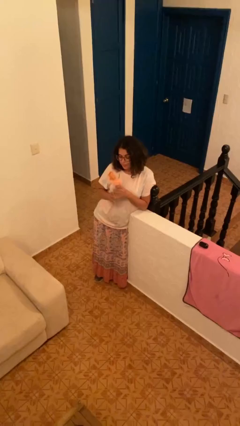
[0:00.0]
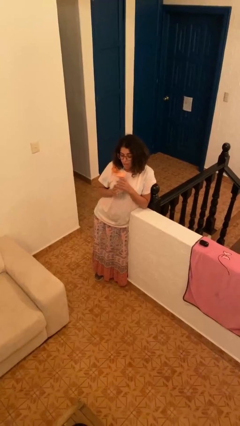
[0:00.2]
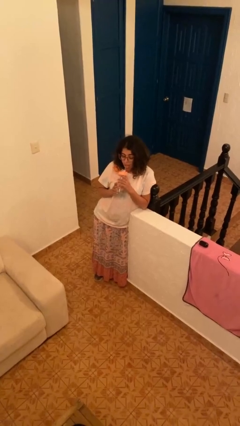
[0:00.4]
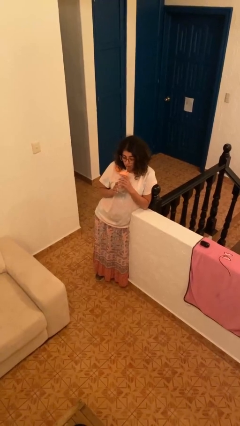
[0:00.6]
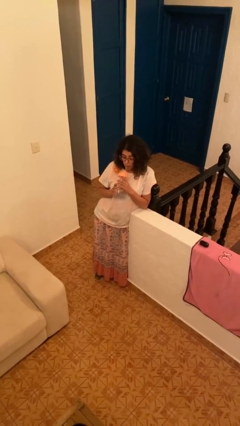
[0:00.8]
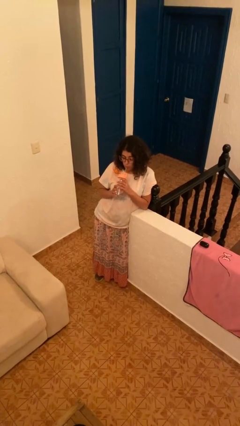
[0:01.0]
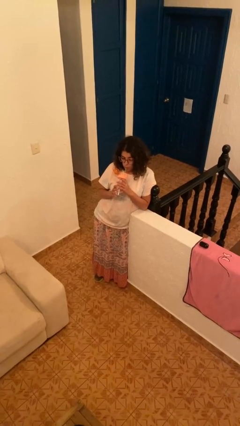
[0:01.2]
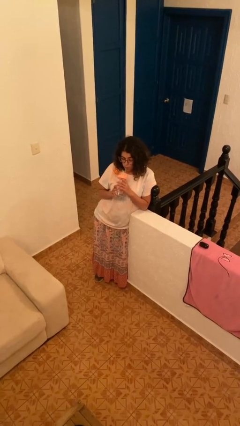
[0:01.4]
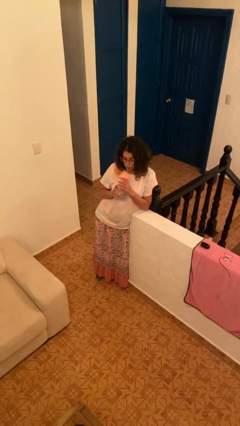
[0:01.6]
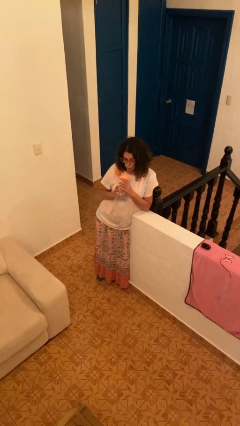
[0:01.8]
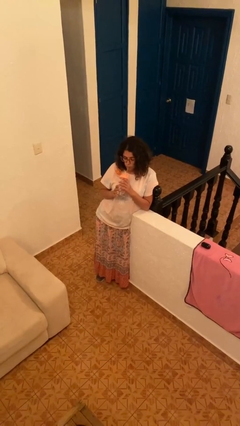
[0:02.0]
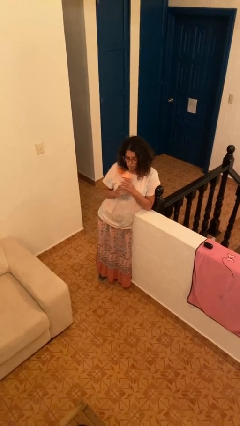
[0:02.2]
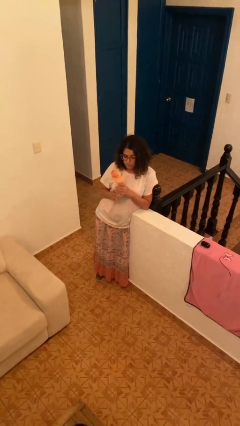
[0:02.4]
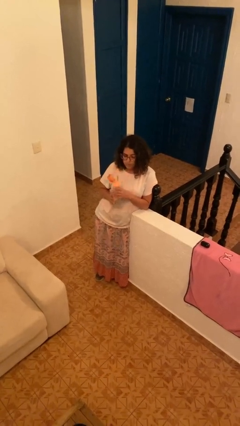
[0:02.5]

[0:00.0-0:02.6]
person drinks from straw

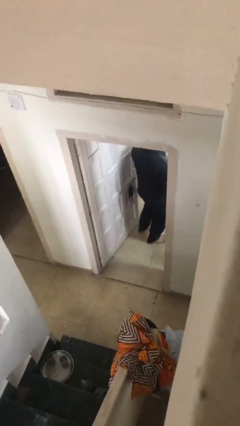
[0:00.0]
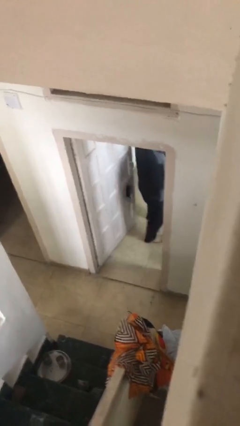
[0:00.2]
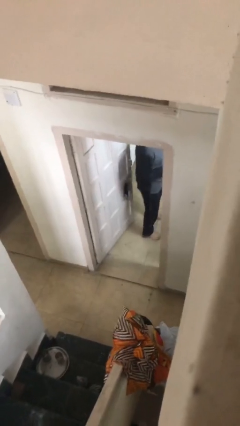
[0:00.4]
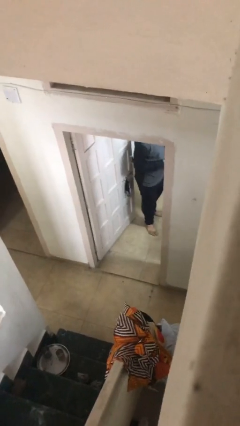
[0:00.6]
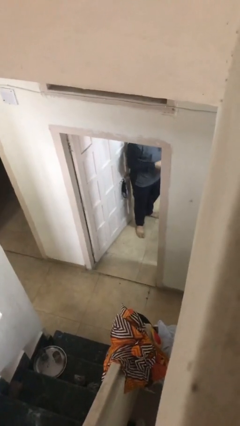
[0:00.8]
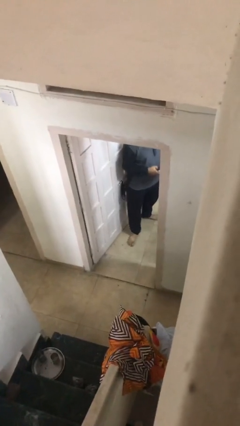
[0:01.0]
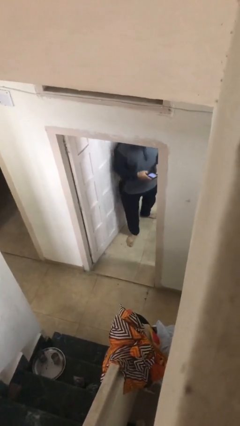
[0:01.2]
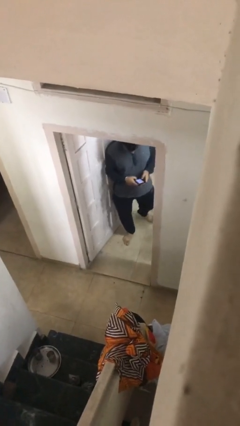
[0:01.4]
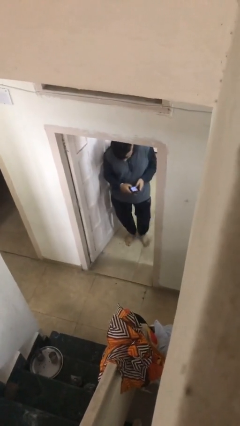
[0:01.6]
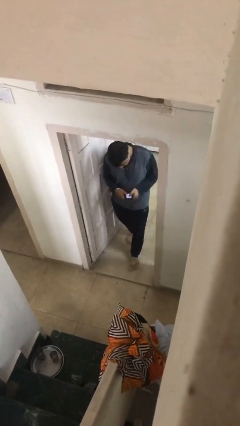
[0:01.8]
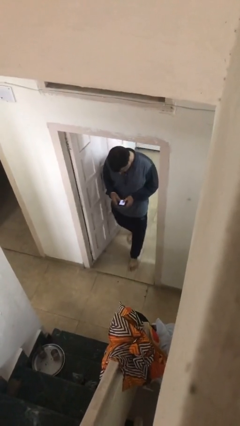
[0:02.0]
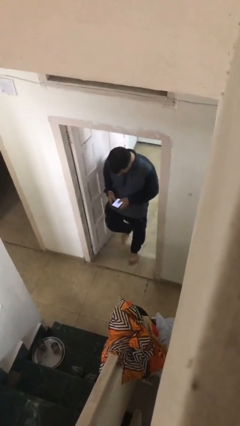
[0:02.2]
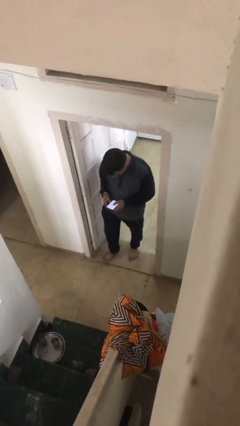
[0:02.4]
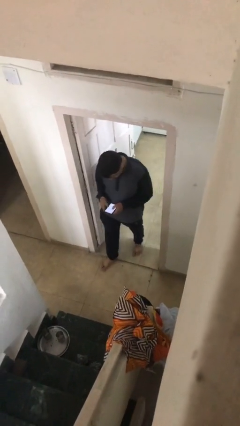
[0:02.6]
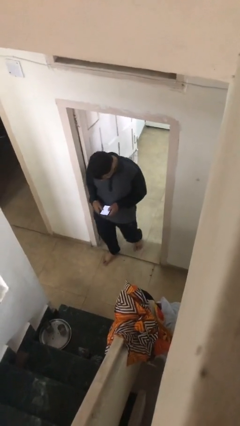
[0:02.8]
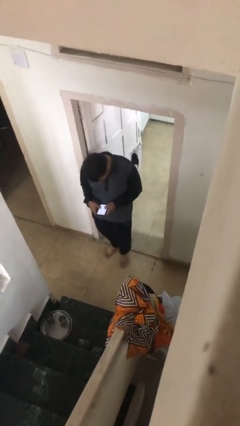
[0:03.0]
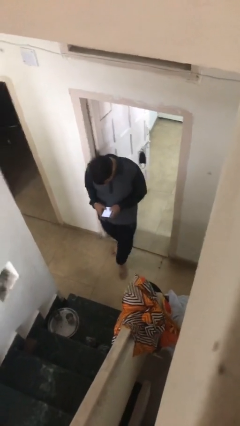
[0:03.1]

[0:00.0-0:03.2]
person enters scene through structure

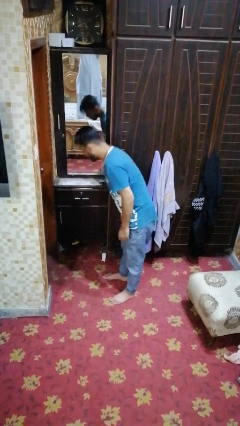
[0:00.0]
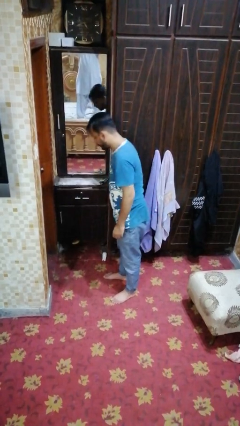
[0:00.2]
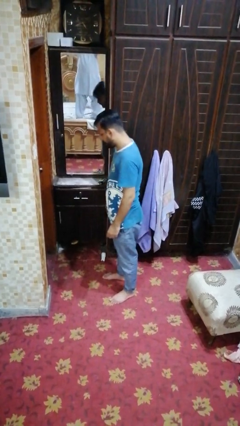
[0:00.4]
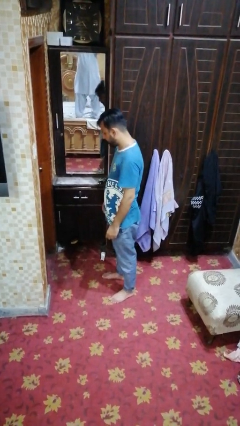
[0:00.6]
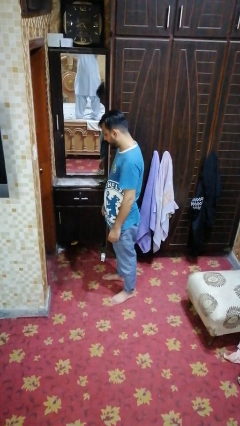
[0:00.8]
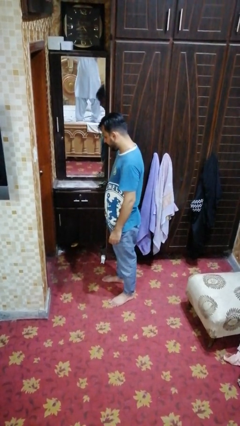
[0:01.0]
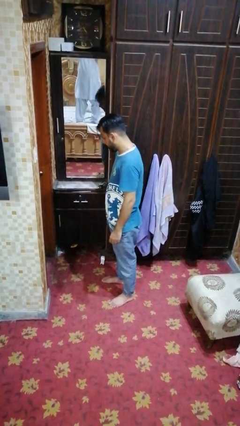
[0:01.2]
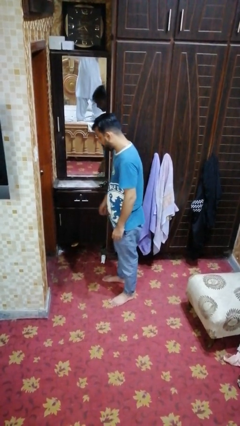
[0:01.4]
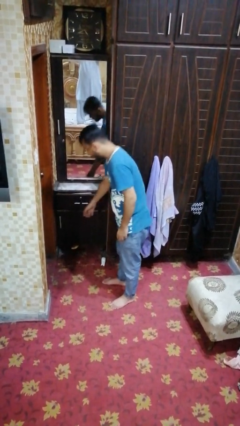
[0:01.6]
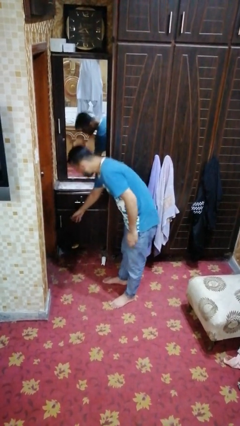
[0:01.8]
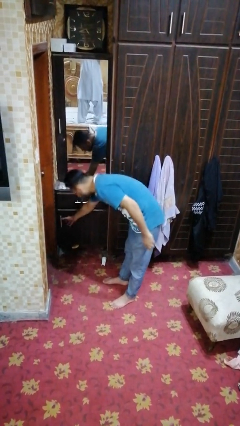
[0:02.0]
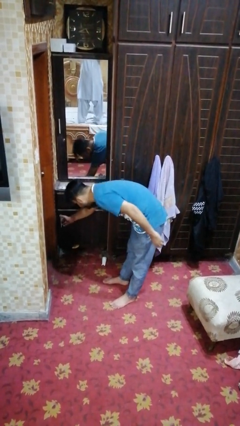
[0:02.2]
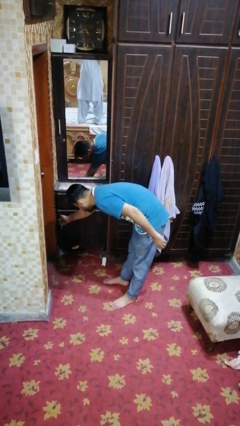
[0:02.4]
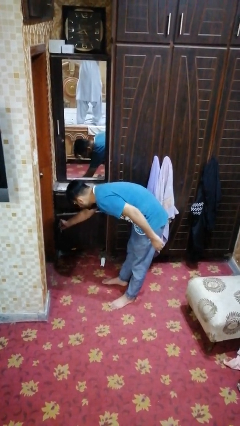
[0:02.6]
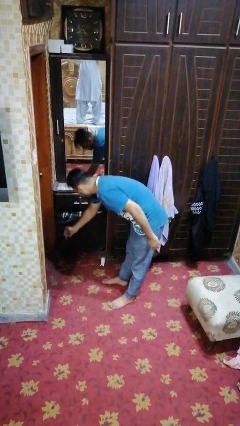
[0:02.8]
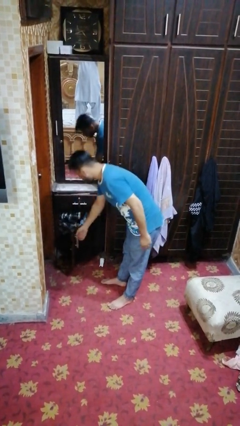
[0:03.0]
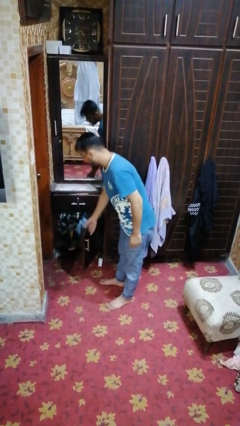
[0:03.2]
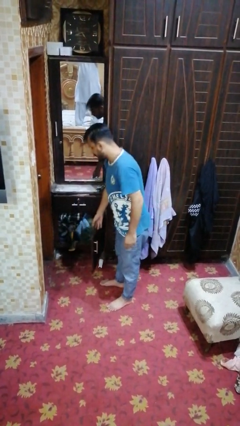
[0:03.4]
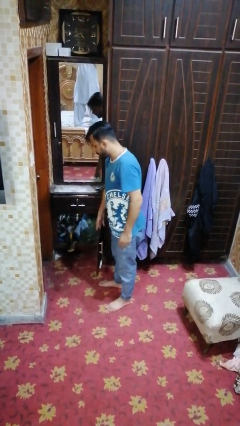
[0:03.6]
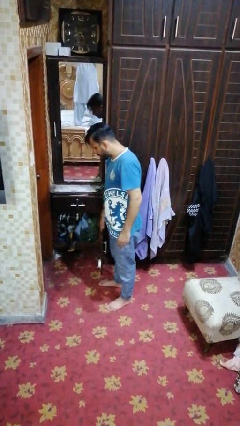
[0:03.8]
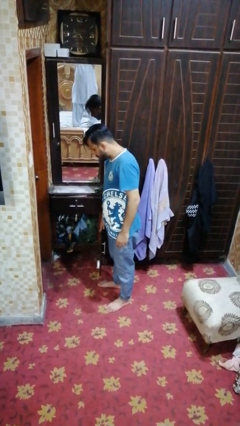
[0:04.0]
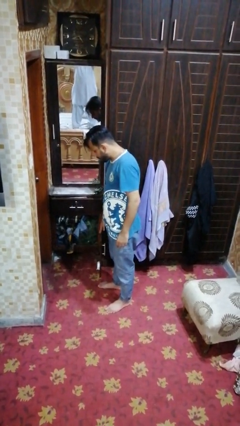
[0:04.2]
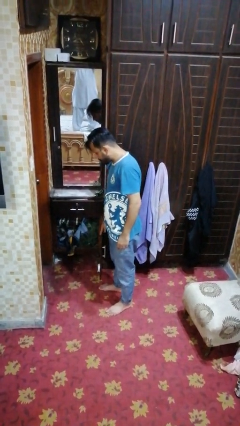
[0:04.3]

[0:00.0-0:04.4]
person opens dresser drawer

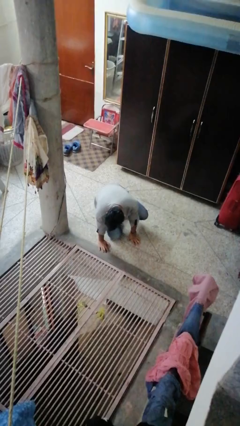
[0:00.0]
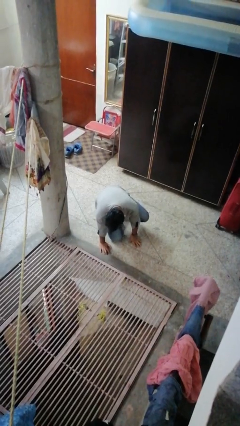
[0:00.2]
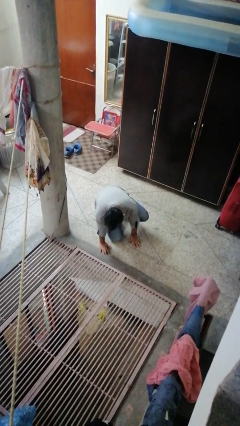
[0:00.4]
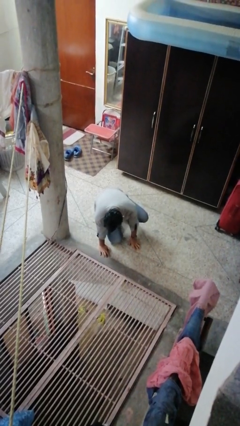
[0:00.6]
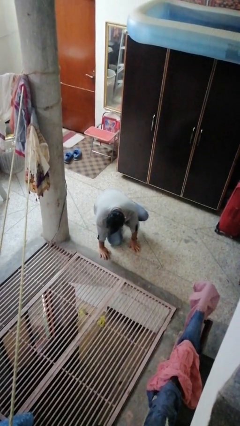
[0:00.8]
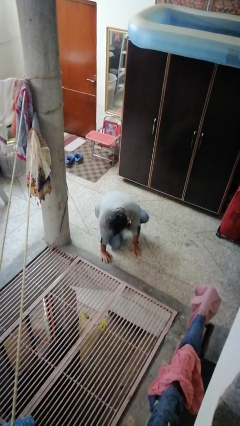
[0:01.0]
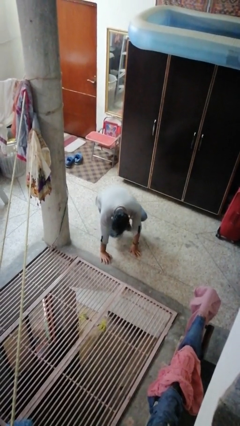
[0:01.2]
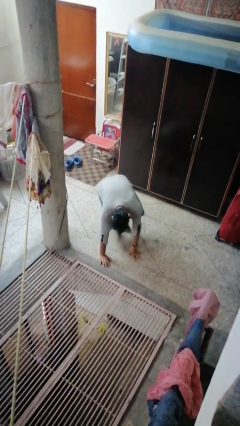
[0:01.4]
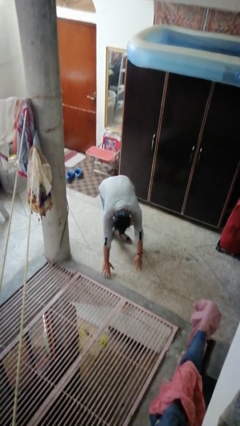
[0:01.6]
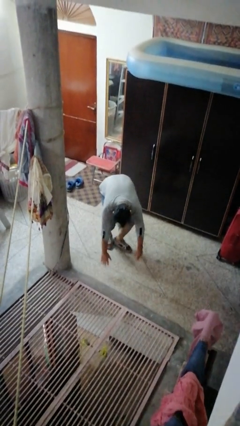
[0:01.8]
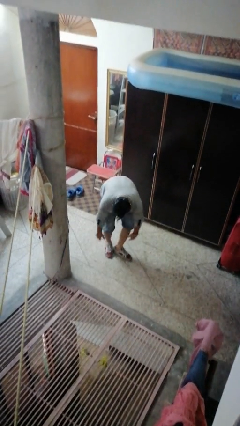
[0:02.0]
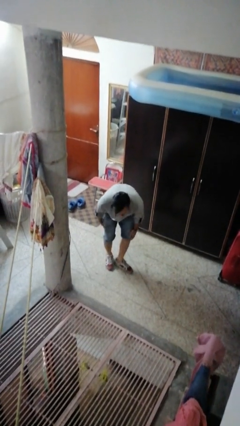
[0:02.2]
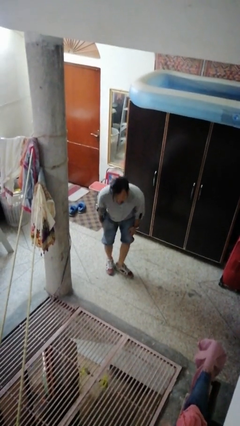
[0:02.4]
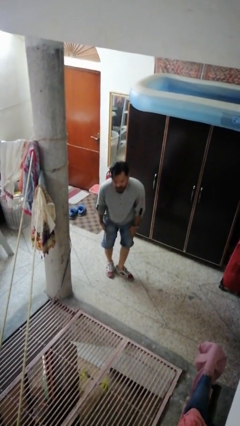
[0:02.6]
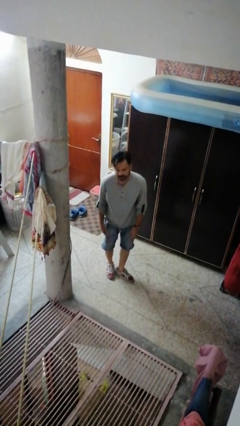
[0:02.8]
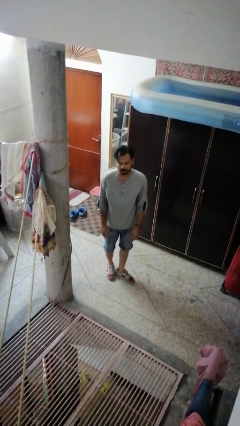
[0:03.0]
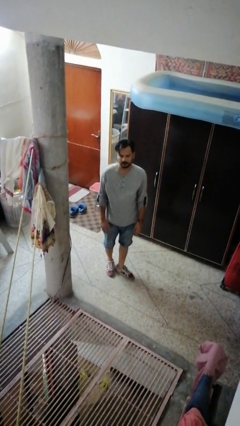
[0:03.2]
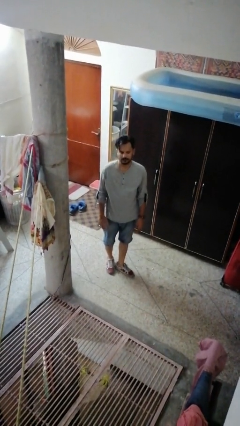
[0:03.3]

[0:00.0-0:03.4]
person stands up from floor

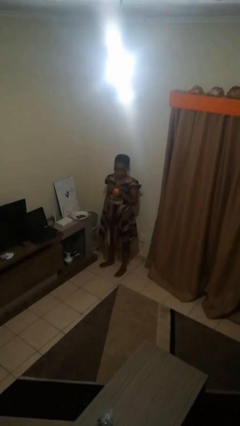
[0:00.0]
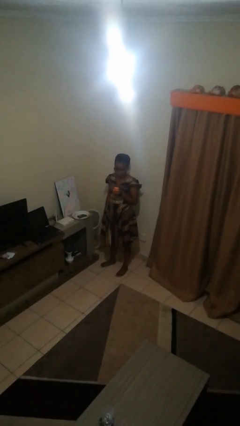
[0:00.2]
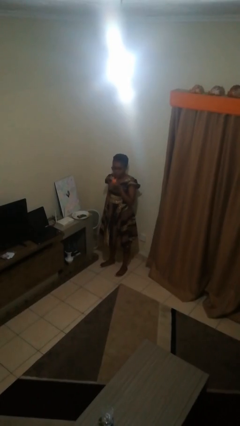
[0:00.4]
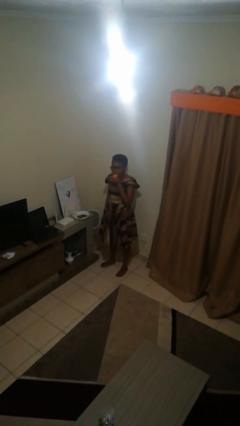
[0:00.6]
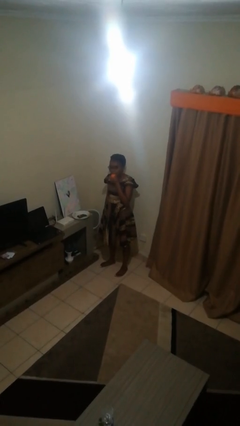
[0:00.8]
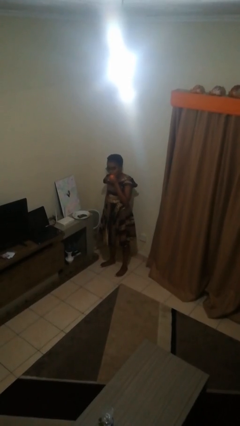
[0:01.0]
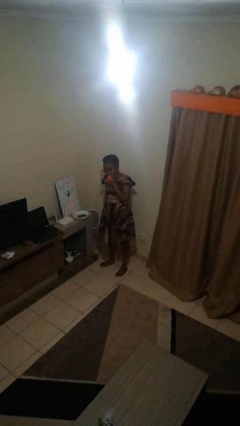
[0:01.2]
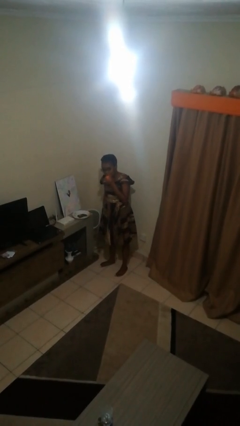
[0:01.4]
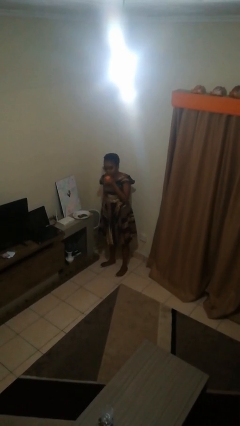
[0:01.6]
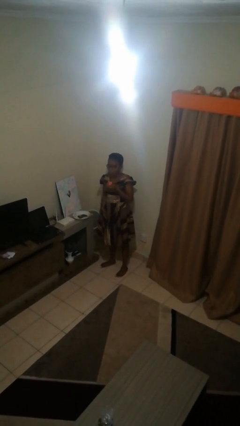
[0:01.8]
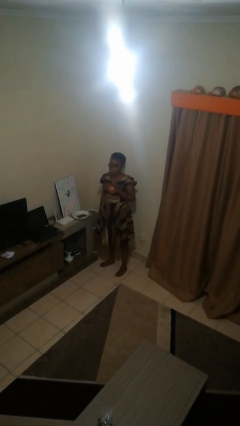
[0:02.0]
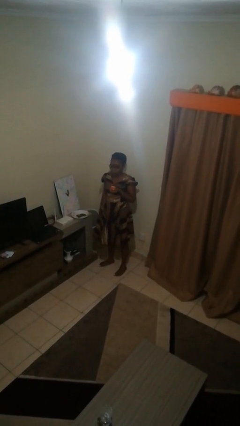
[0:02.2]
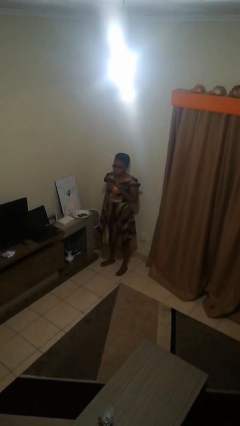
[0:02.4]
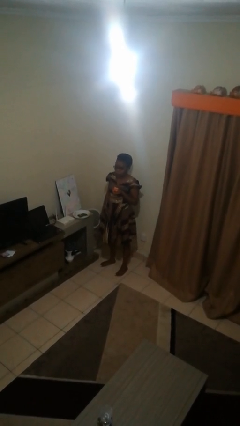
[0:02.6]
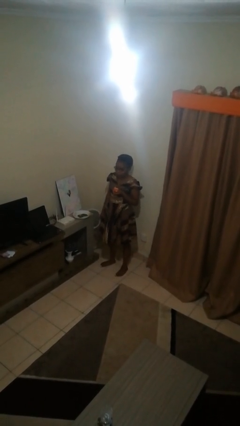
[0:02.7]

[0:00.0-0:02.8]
person eats apple

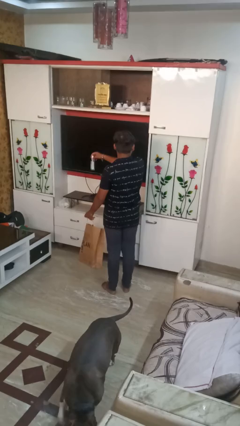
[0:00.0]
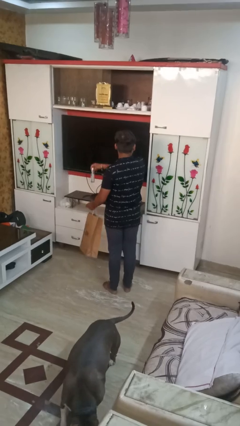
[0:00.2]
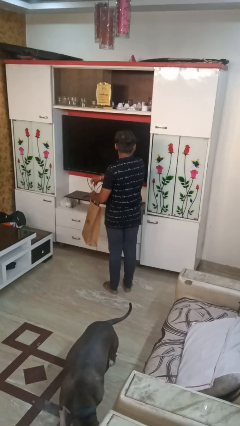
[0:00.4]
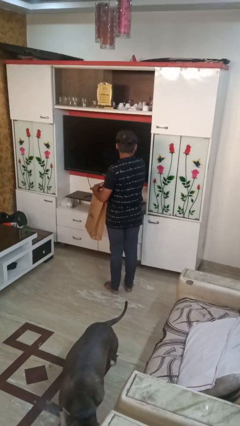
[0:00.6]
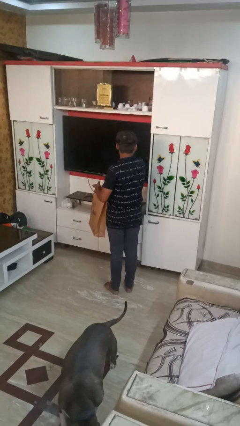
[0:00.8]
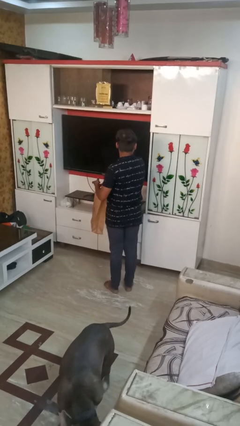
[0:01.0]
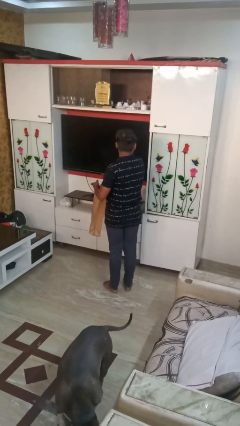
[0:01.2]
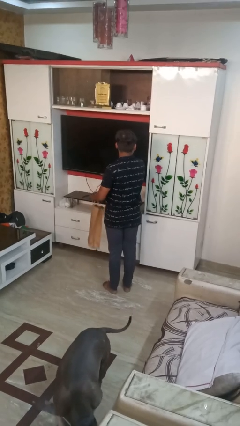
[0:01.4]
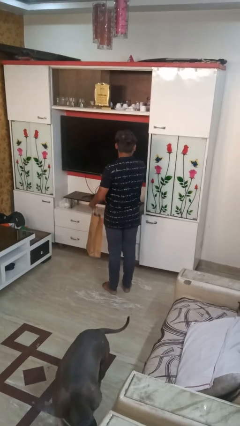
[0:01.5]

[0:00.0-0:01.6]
person puts object into bag
